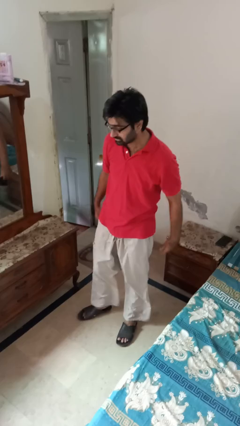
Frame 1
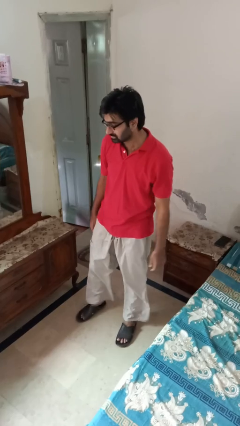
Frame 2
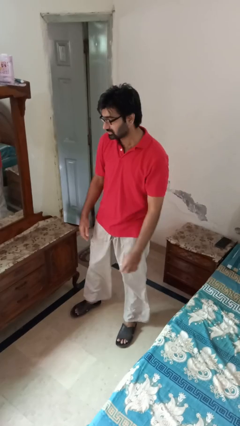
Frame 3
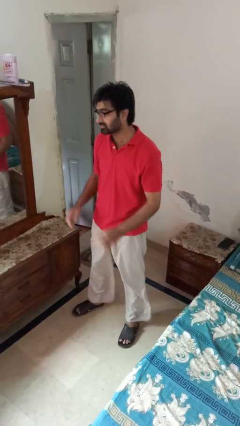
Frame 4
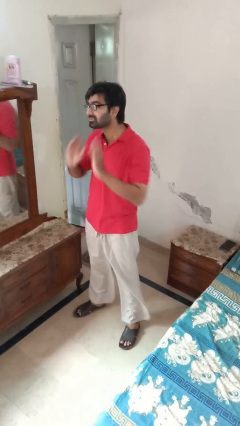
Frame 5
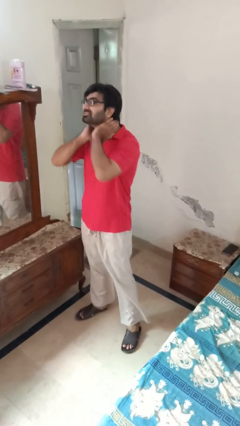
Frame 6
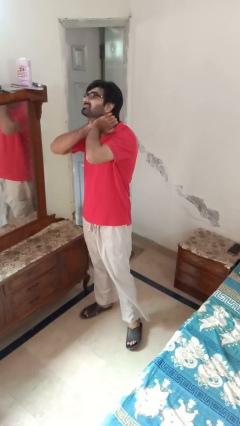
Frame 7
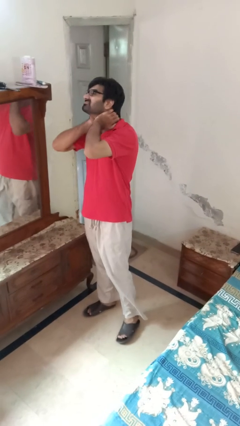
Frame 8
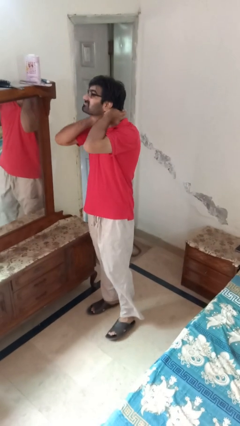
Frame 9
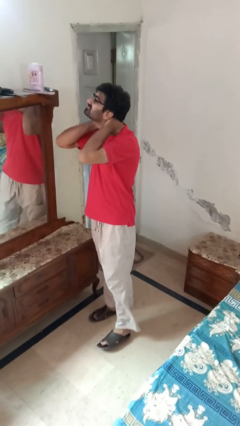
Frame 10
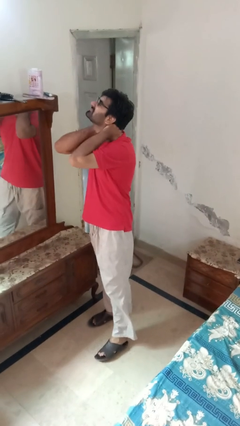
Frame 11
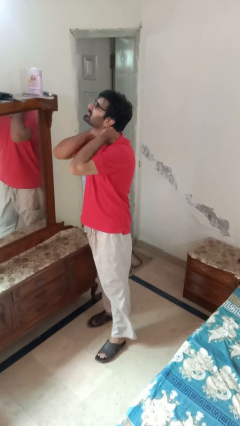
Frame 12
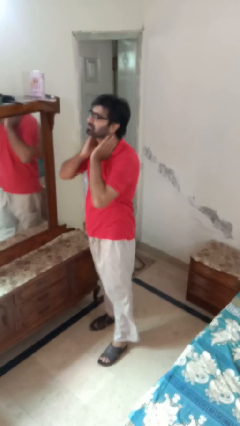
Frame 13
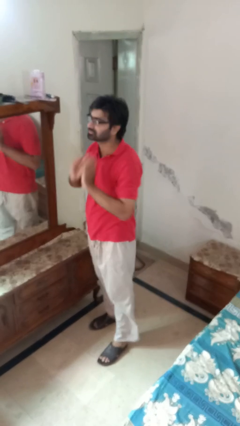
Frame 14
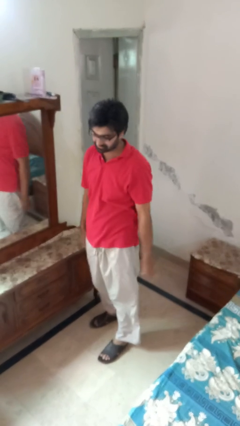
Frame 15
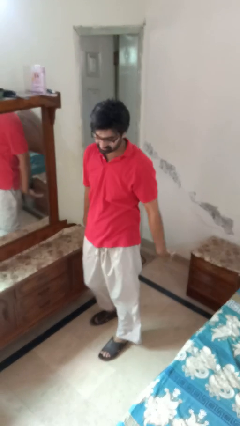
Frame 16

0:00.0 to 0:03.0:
person rubs neck

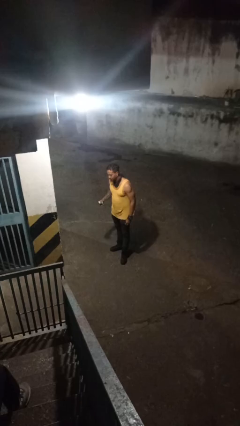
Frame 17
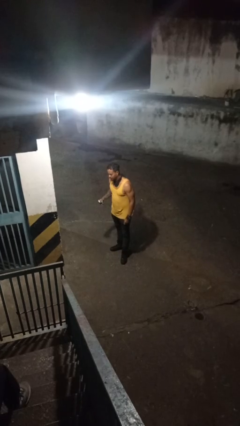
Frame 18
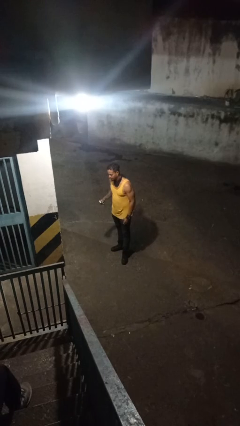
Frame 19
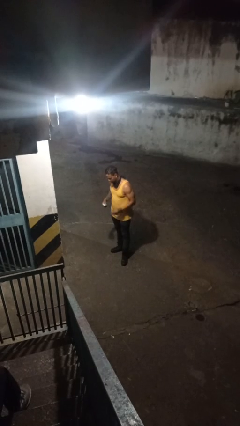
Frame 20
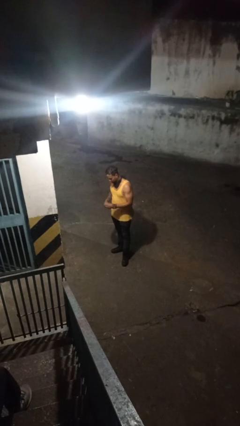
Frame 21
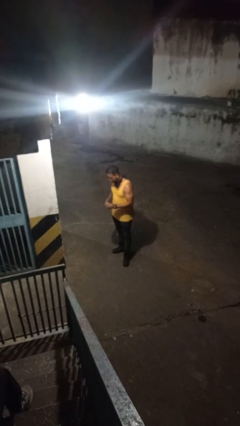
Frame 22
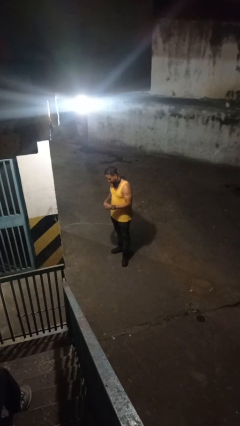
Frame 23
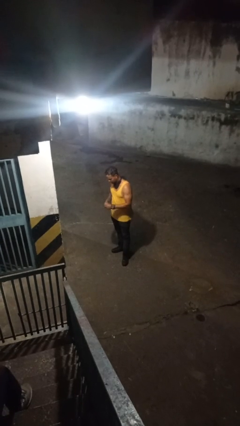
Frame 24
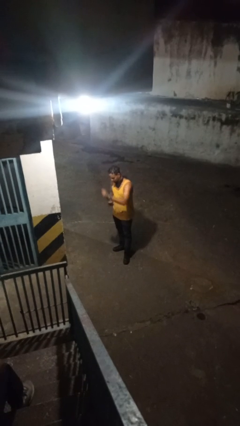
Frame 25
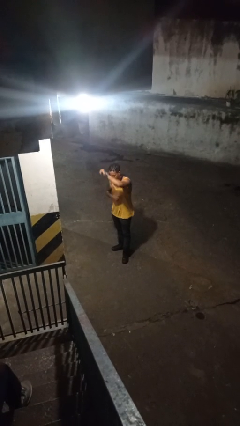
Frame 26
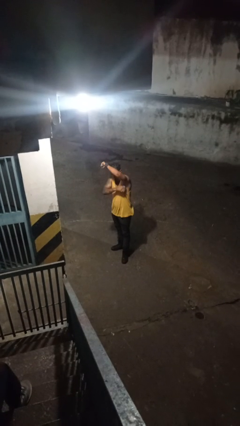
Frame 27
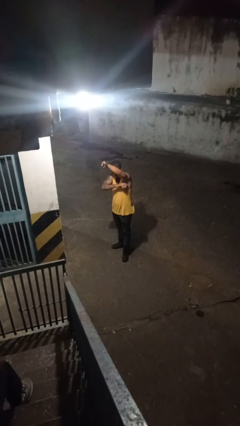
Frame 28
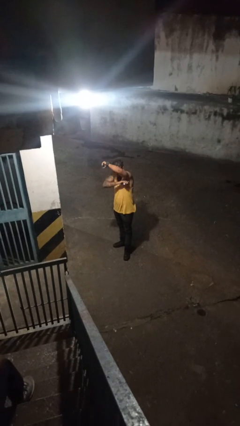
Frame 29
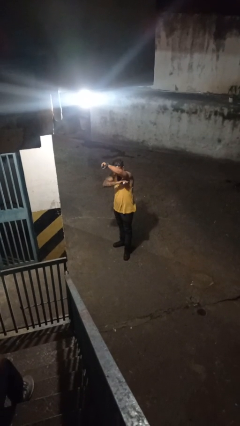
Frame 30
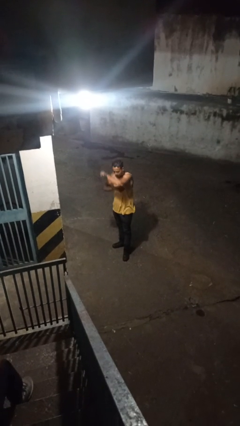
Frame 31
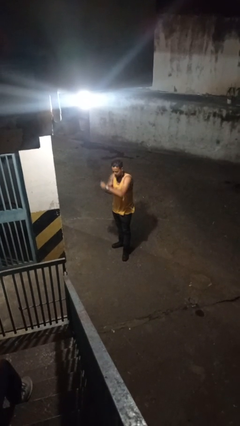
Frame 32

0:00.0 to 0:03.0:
person applies deodorant

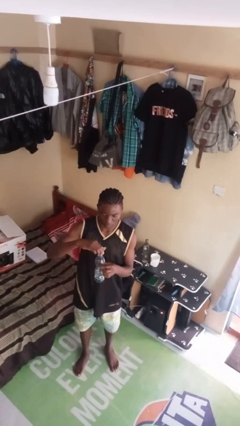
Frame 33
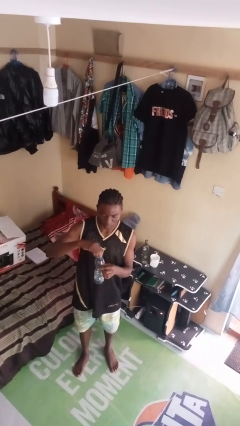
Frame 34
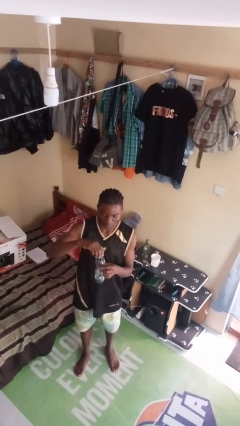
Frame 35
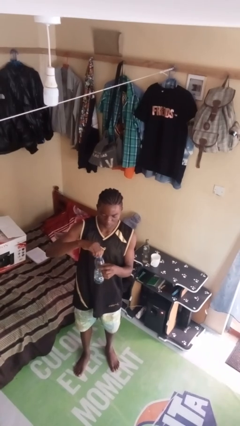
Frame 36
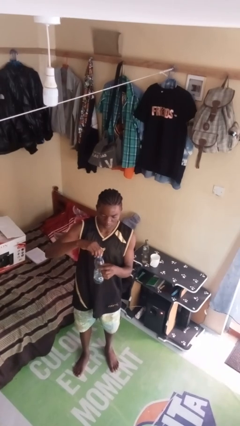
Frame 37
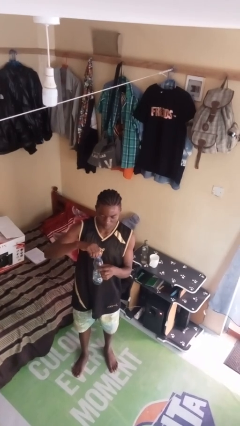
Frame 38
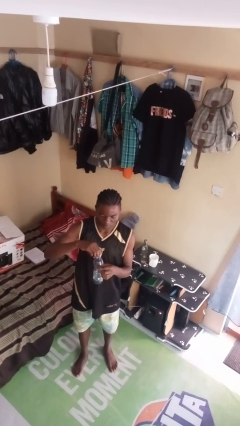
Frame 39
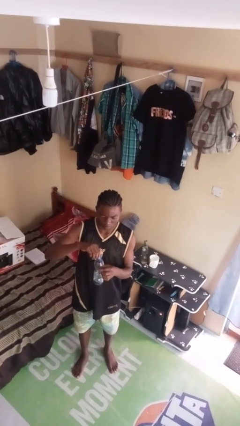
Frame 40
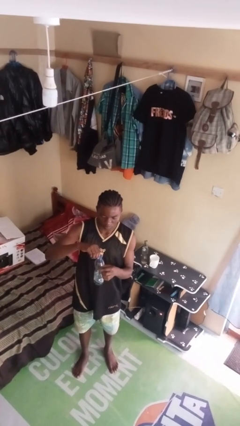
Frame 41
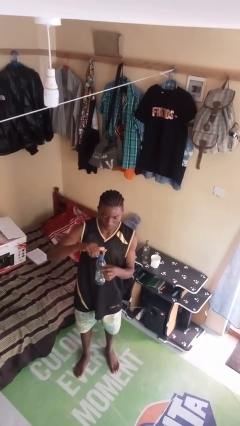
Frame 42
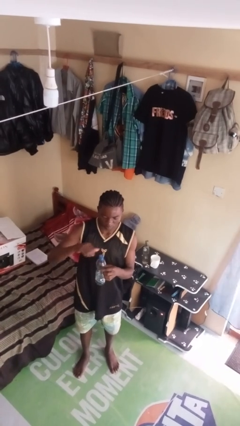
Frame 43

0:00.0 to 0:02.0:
person screws lid to bottle

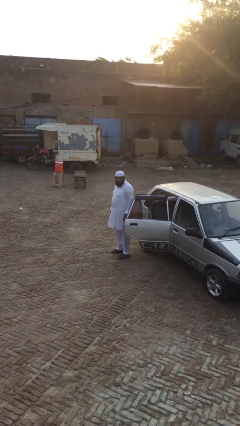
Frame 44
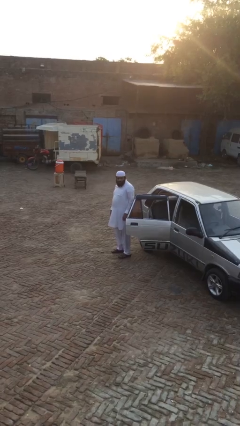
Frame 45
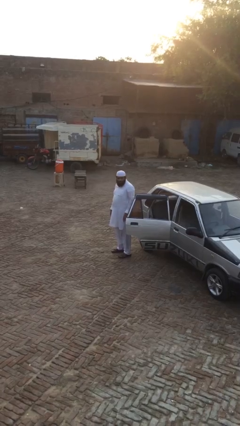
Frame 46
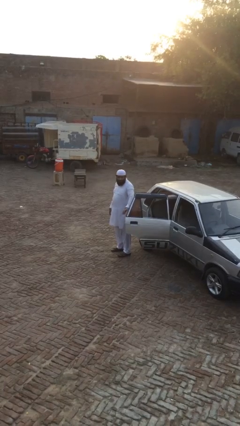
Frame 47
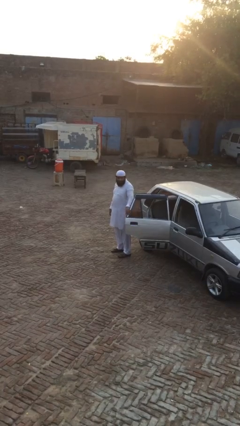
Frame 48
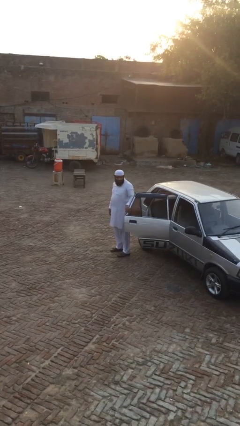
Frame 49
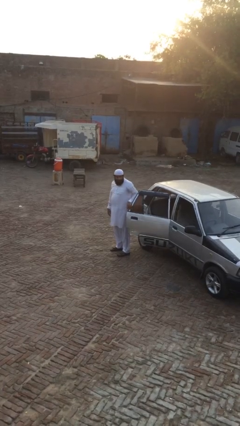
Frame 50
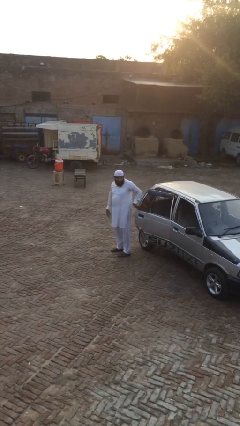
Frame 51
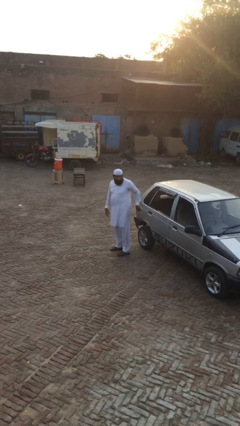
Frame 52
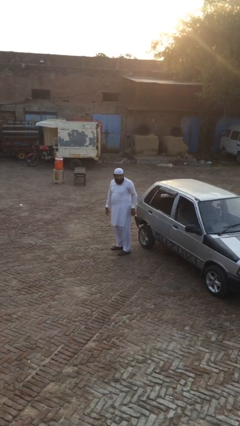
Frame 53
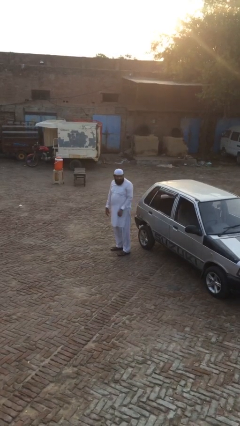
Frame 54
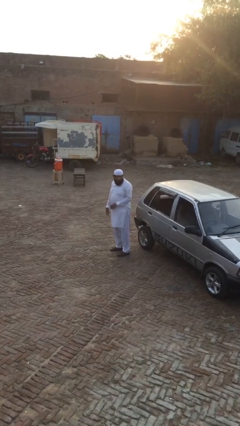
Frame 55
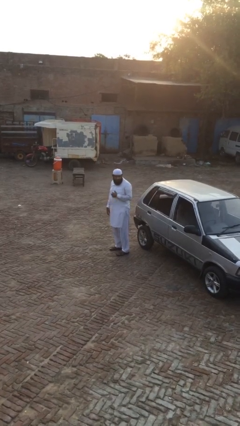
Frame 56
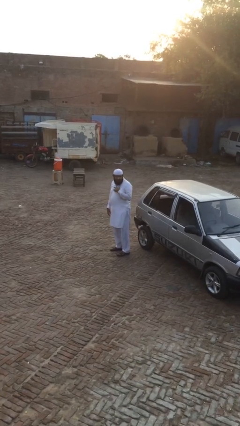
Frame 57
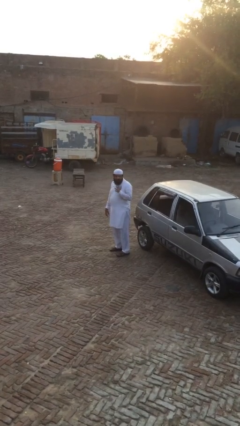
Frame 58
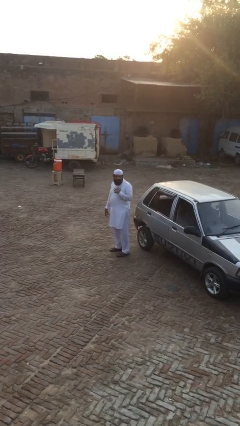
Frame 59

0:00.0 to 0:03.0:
person closes car door

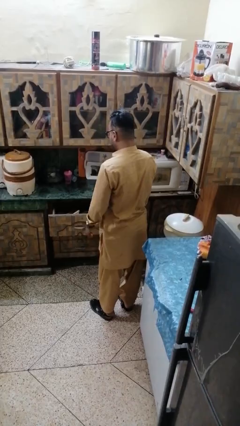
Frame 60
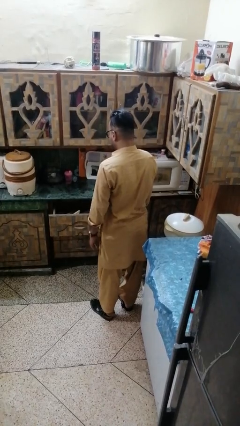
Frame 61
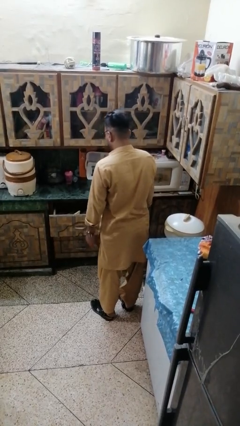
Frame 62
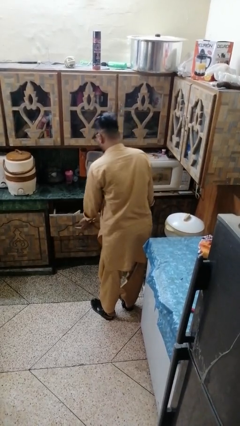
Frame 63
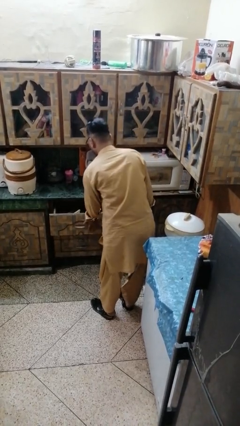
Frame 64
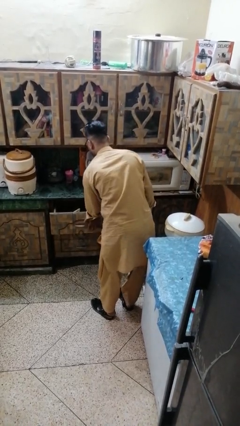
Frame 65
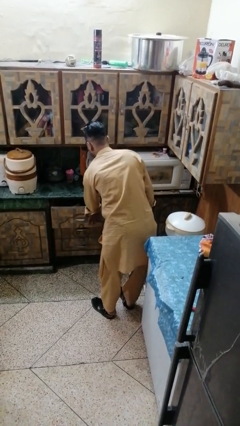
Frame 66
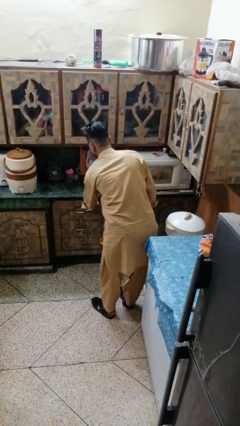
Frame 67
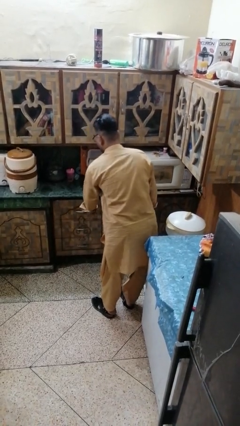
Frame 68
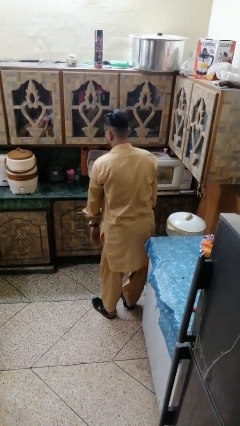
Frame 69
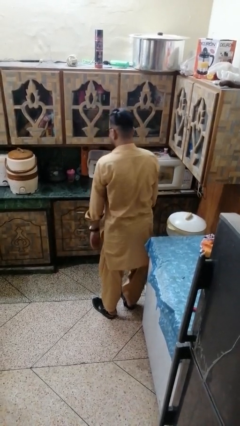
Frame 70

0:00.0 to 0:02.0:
person closes kitchen drawer

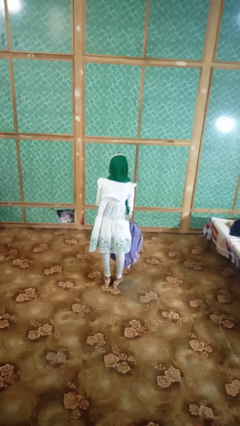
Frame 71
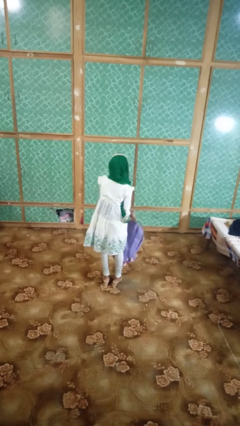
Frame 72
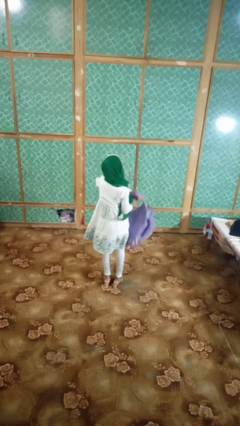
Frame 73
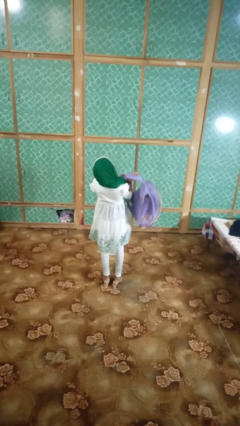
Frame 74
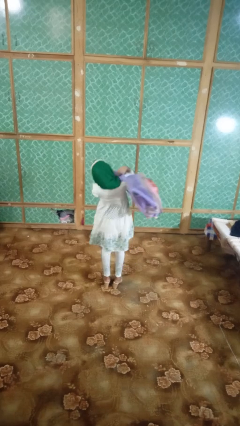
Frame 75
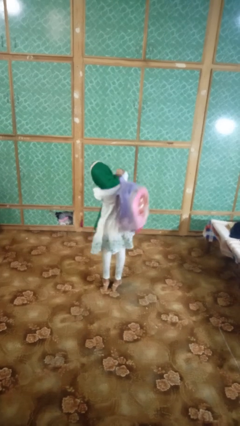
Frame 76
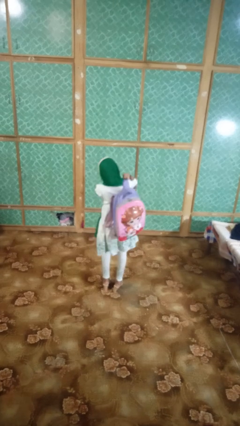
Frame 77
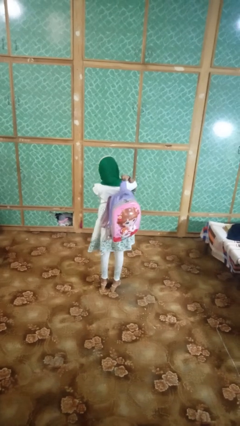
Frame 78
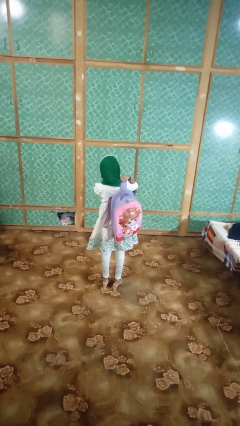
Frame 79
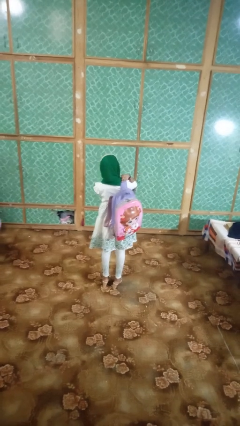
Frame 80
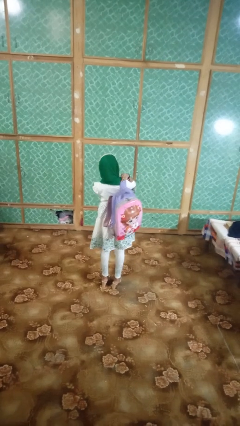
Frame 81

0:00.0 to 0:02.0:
person puts on backpack

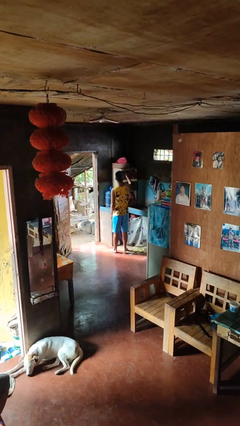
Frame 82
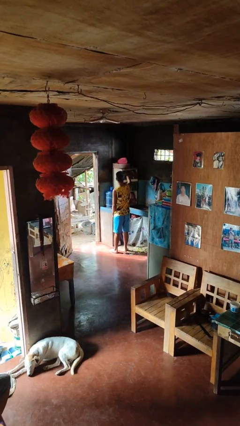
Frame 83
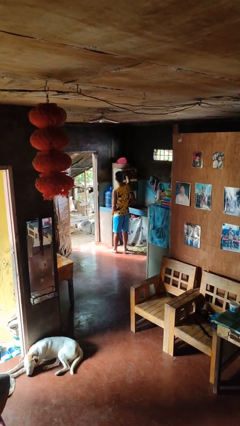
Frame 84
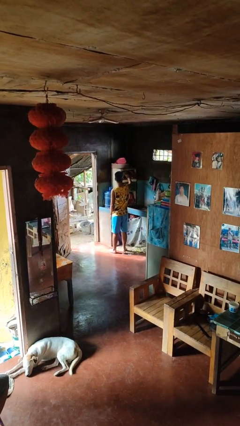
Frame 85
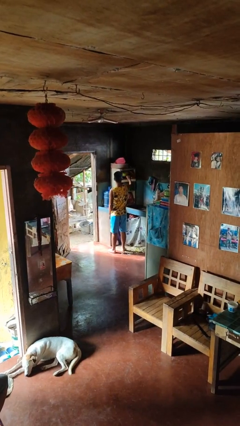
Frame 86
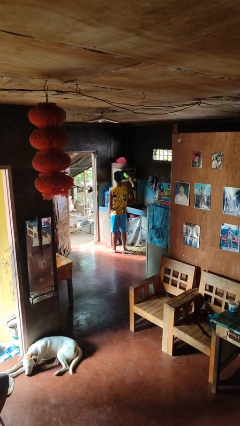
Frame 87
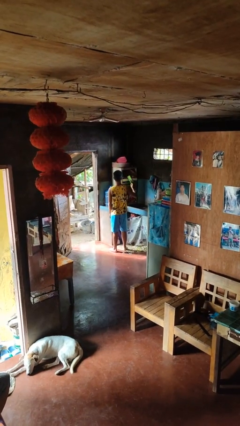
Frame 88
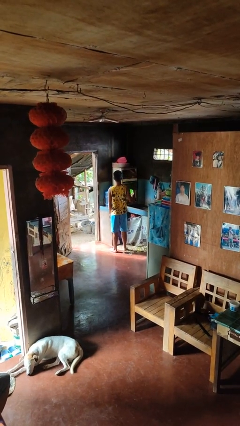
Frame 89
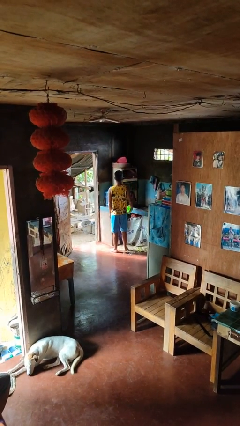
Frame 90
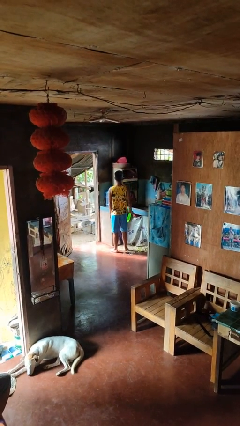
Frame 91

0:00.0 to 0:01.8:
person takes object from cabinet
